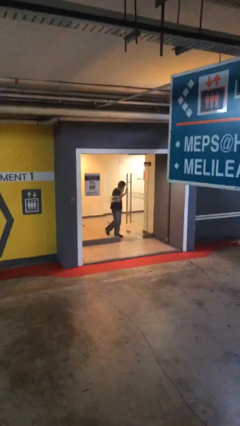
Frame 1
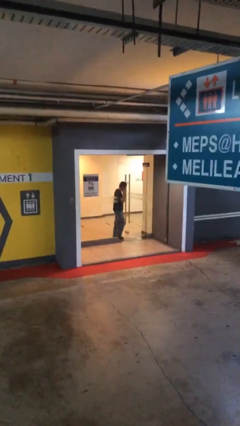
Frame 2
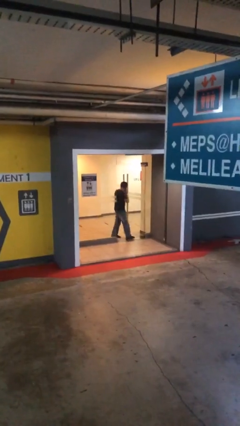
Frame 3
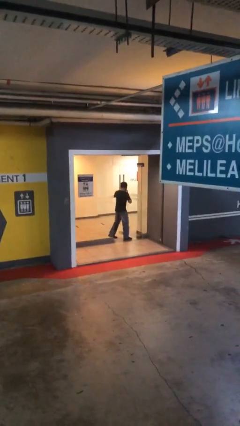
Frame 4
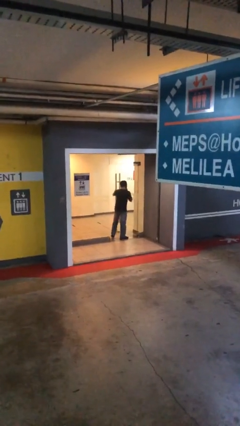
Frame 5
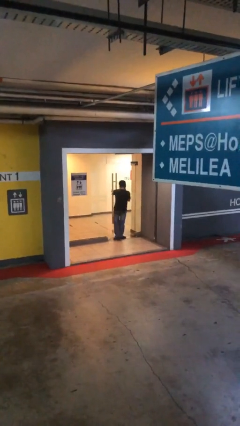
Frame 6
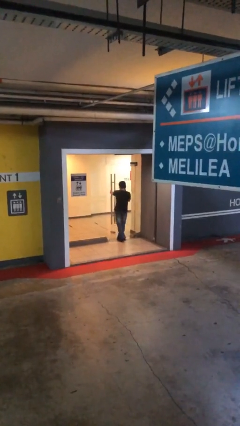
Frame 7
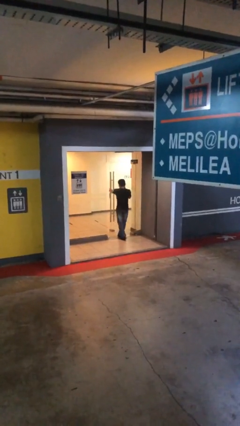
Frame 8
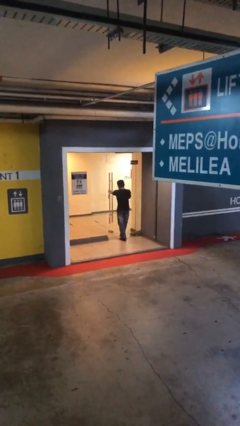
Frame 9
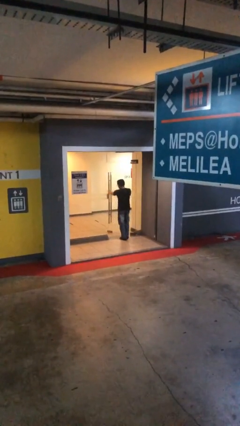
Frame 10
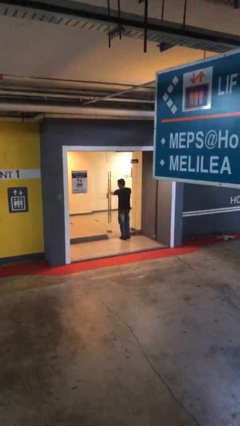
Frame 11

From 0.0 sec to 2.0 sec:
person enters scene through structure

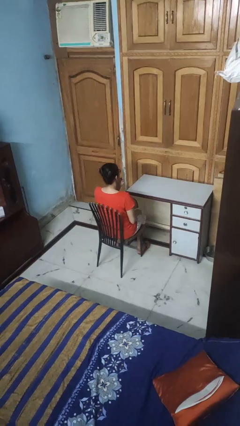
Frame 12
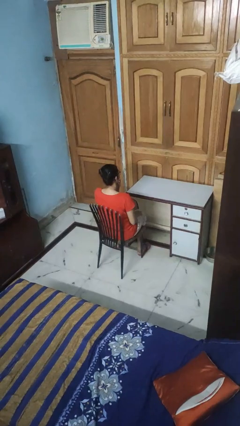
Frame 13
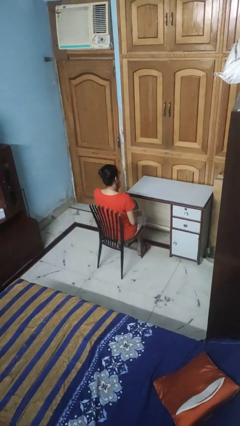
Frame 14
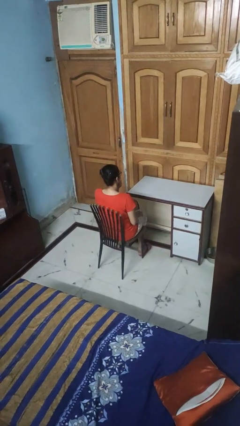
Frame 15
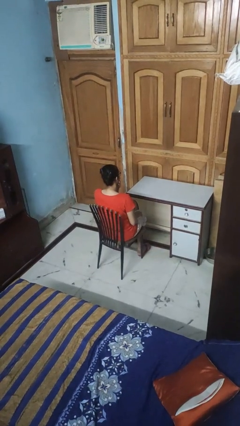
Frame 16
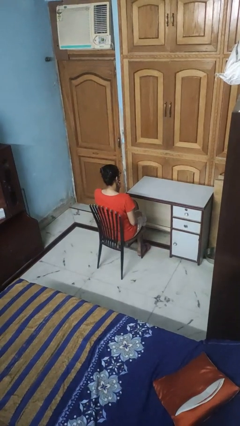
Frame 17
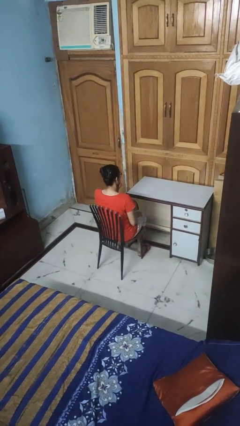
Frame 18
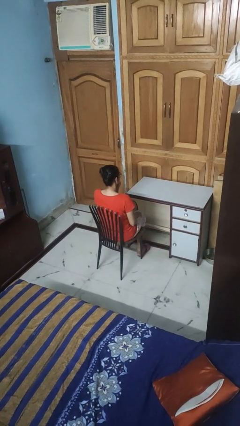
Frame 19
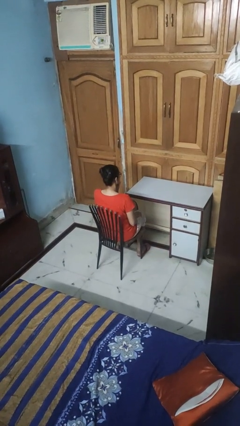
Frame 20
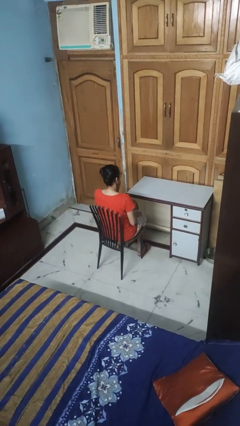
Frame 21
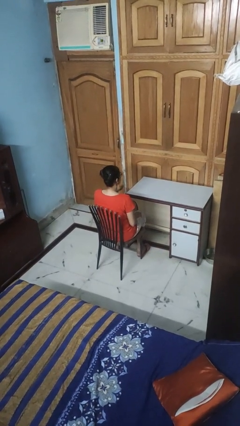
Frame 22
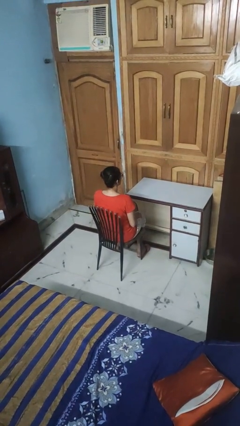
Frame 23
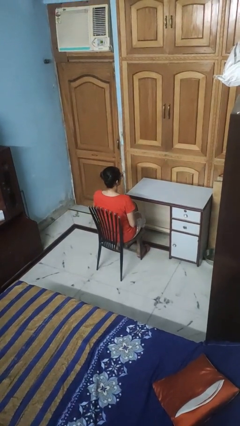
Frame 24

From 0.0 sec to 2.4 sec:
person strokes chin

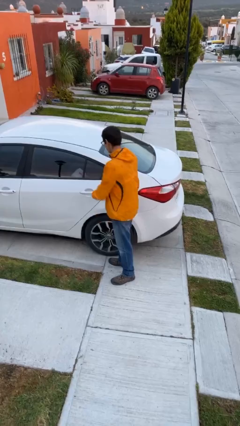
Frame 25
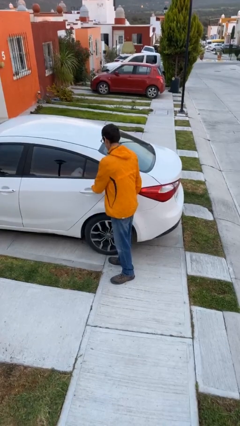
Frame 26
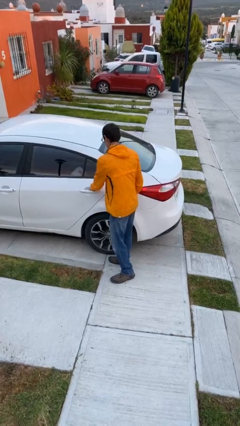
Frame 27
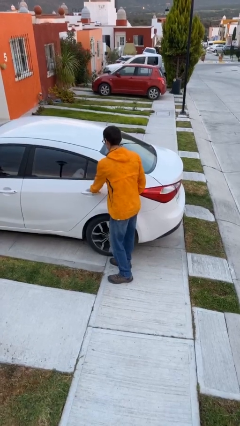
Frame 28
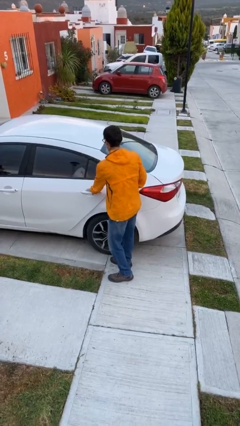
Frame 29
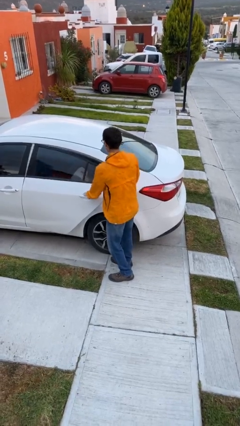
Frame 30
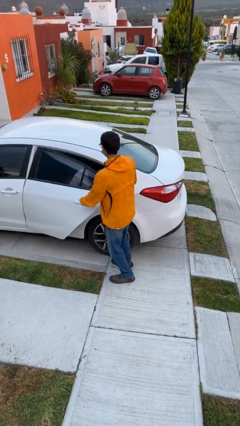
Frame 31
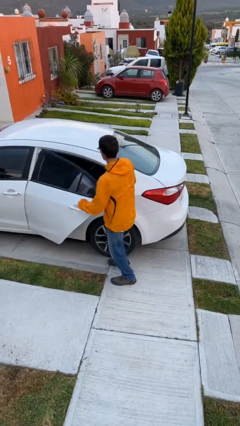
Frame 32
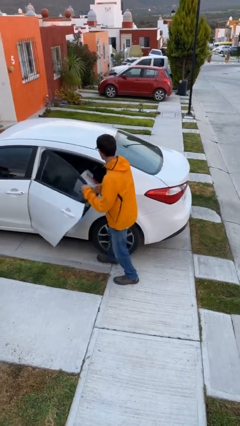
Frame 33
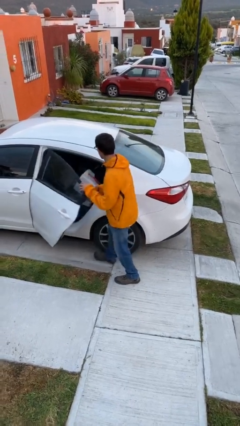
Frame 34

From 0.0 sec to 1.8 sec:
person opens car door

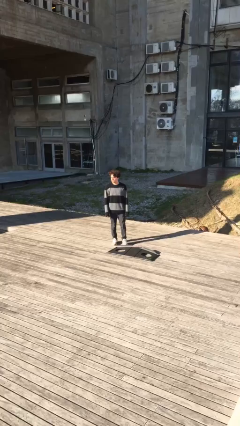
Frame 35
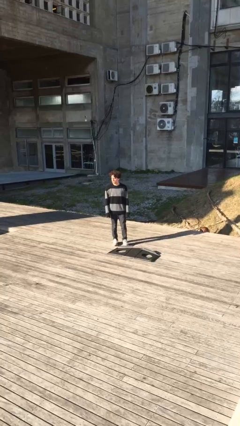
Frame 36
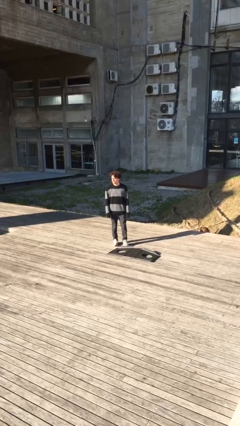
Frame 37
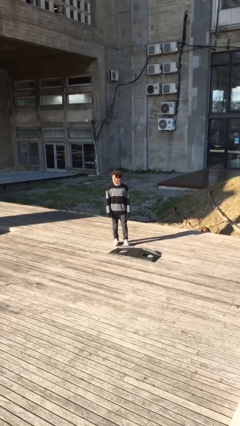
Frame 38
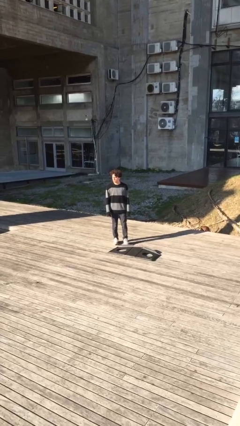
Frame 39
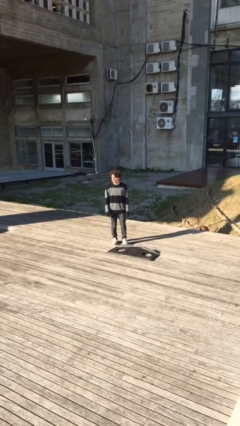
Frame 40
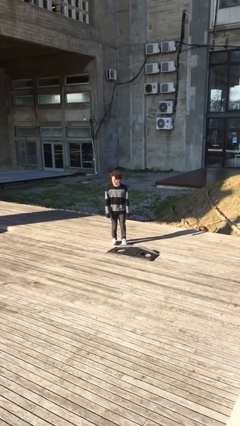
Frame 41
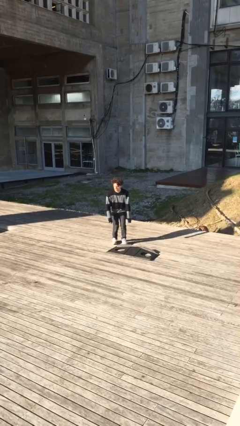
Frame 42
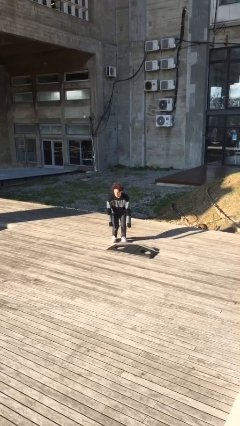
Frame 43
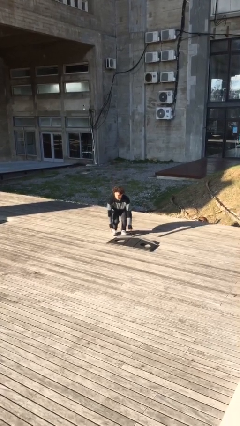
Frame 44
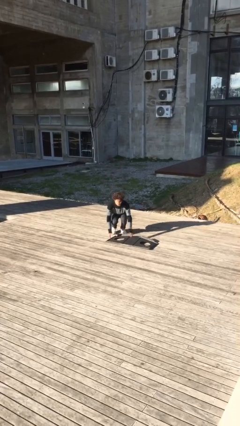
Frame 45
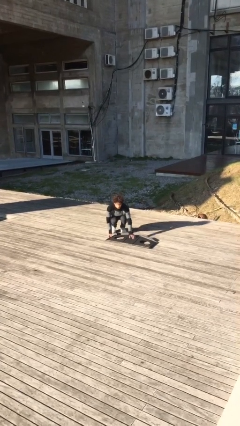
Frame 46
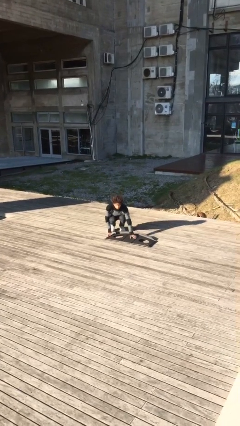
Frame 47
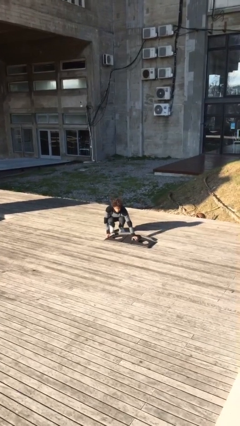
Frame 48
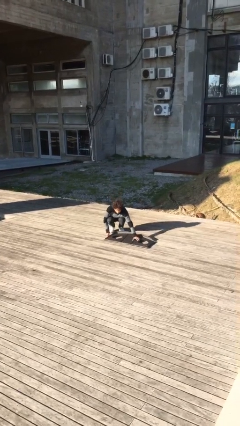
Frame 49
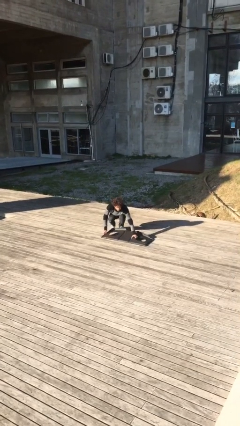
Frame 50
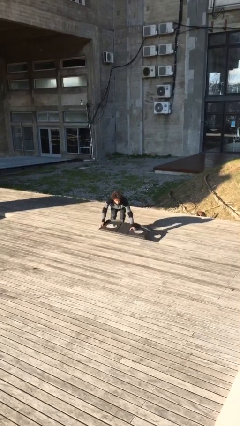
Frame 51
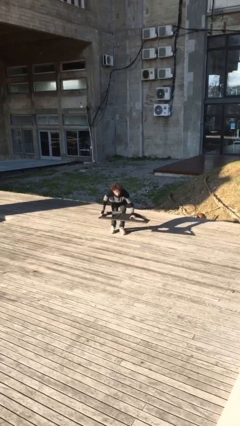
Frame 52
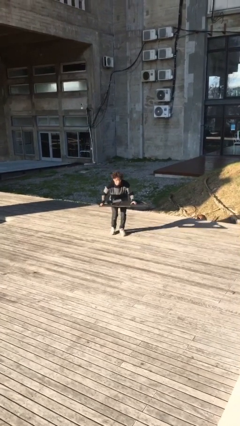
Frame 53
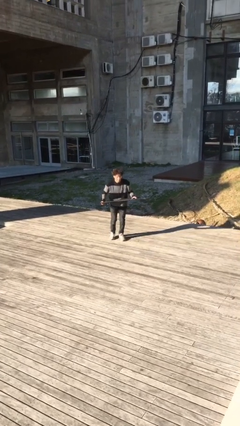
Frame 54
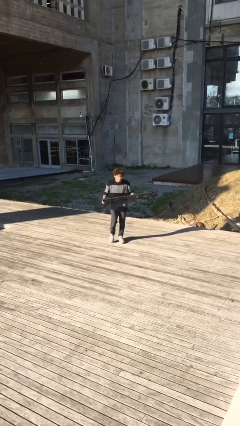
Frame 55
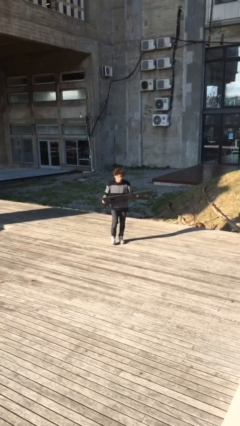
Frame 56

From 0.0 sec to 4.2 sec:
person picks up object from floor

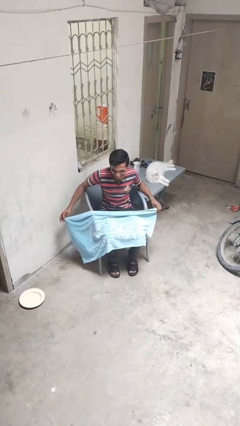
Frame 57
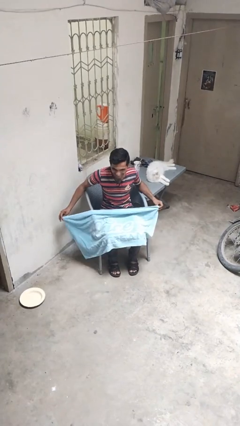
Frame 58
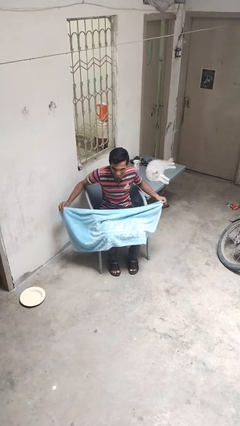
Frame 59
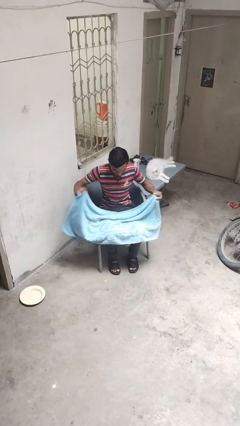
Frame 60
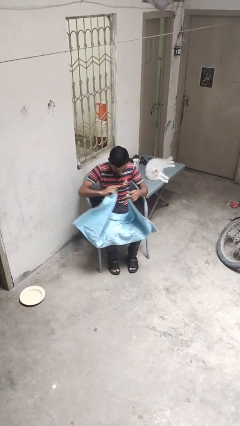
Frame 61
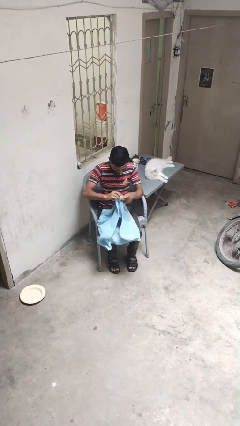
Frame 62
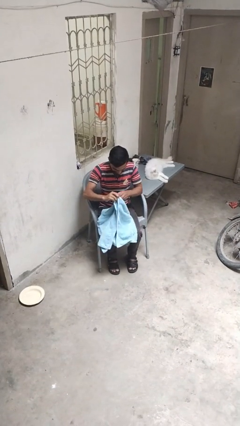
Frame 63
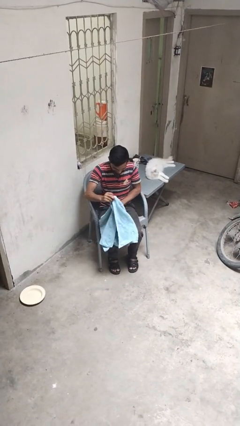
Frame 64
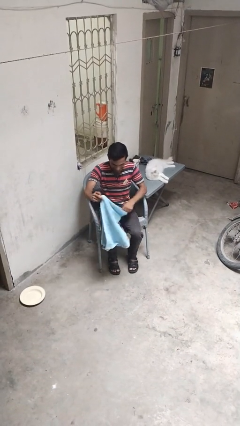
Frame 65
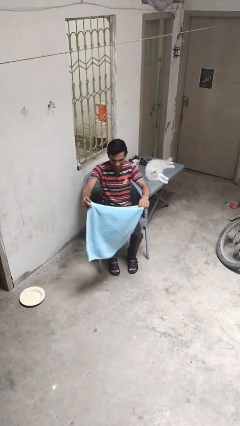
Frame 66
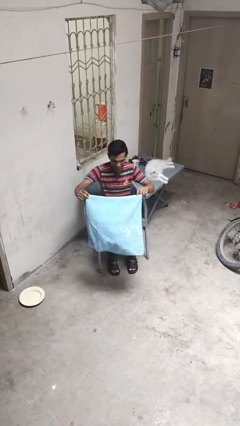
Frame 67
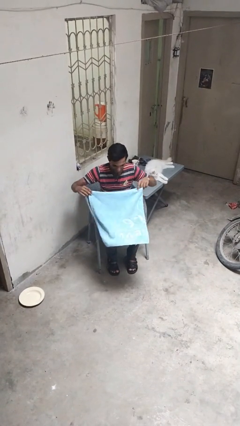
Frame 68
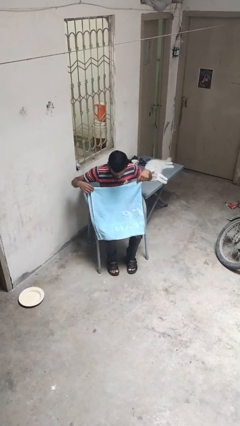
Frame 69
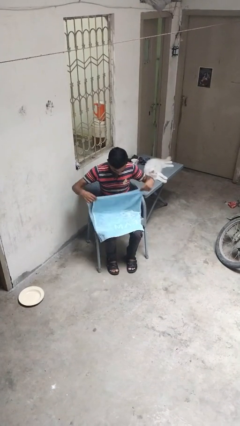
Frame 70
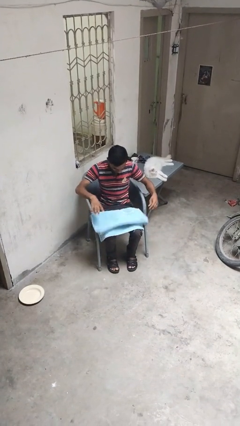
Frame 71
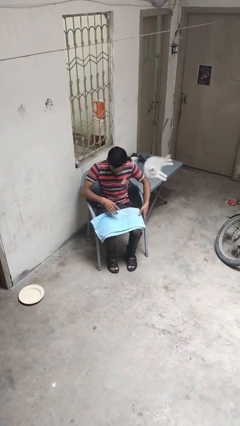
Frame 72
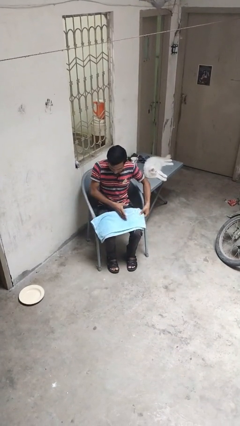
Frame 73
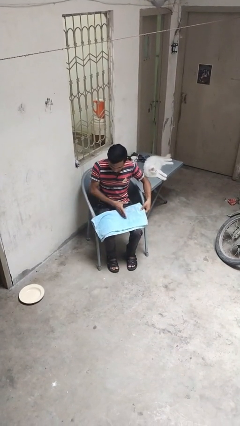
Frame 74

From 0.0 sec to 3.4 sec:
person folds towel

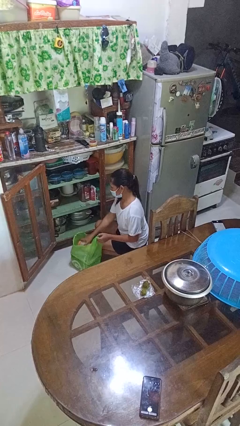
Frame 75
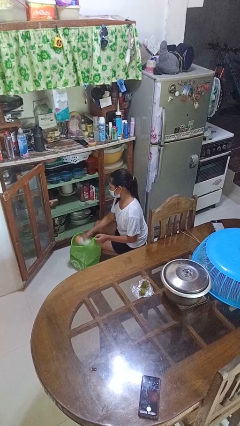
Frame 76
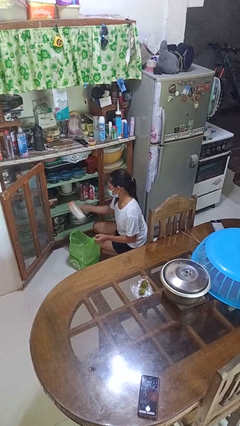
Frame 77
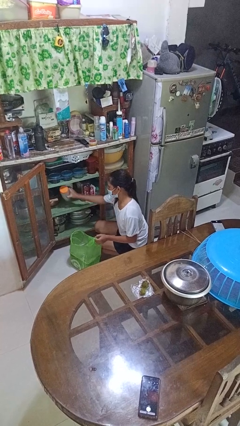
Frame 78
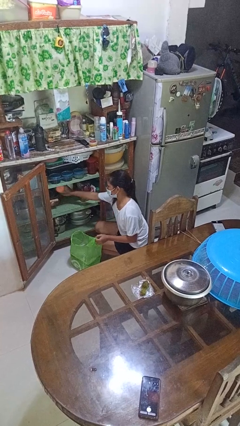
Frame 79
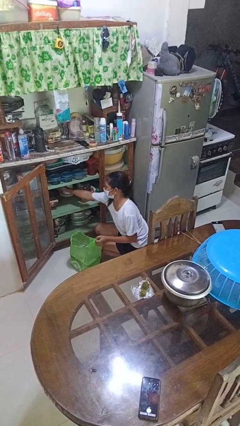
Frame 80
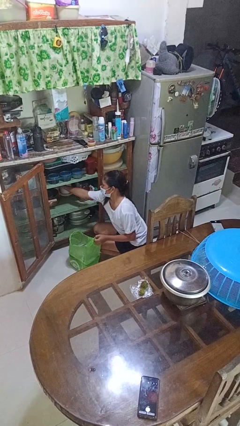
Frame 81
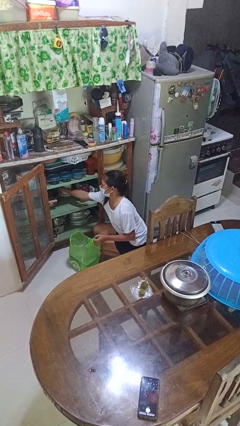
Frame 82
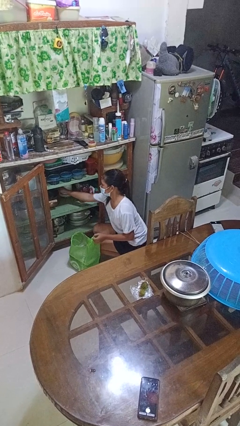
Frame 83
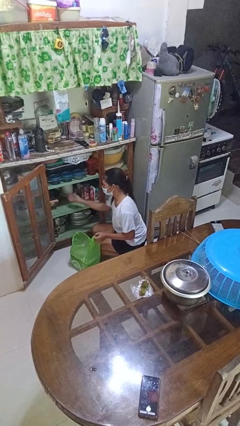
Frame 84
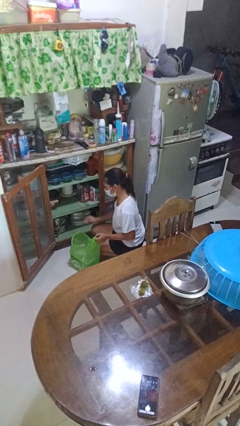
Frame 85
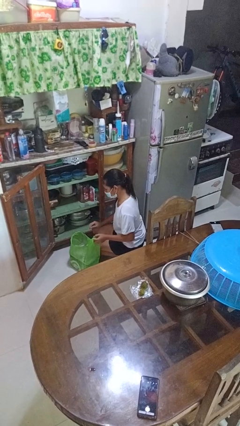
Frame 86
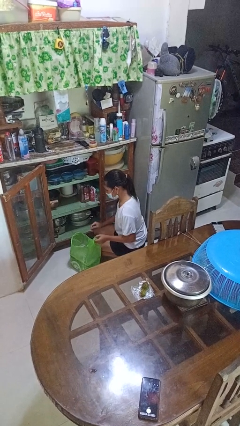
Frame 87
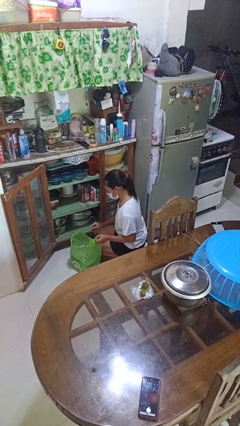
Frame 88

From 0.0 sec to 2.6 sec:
person loads groceries into cabinet

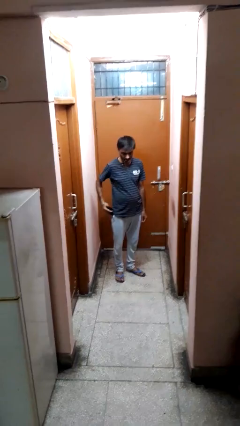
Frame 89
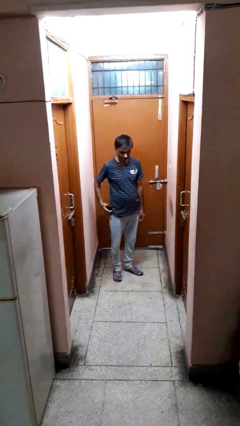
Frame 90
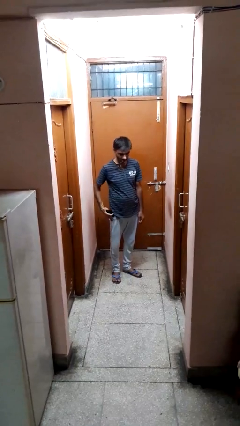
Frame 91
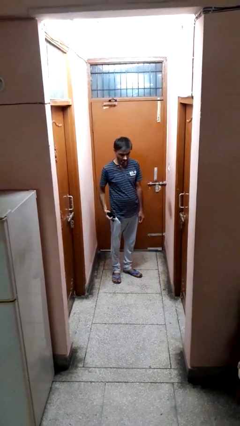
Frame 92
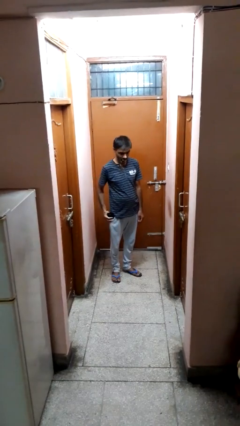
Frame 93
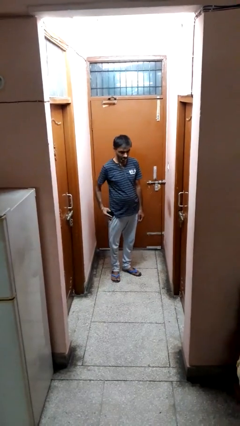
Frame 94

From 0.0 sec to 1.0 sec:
person puts phone into pocket
